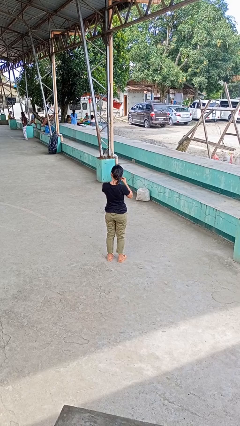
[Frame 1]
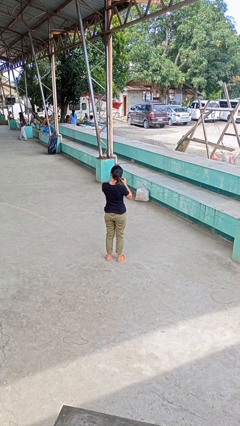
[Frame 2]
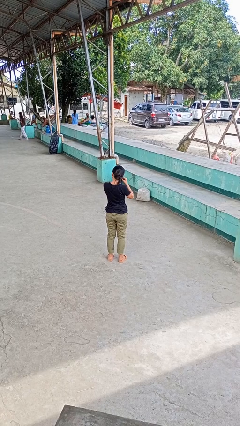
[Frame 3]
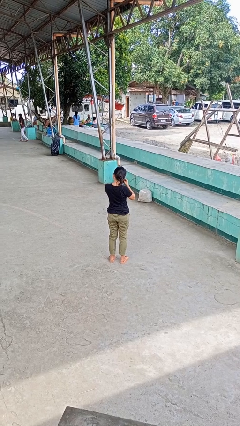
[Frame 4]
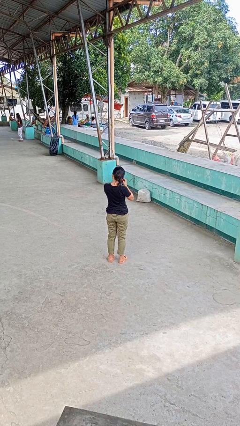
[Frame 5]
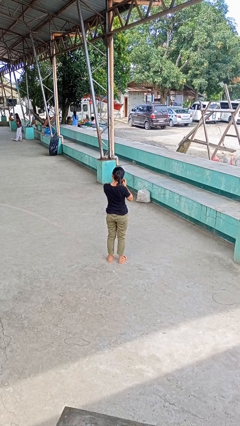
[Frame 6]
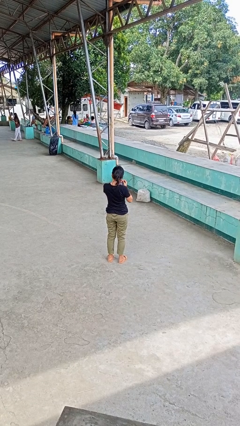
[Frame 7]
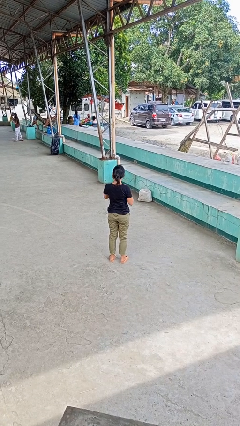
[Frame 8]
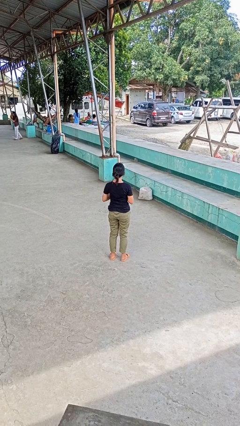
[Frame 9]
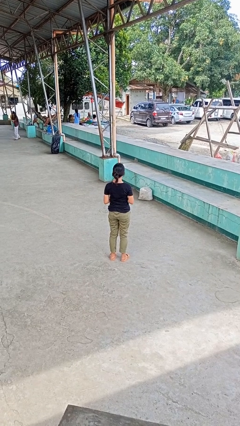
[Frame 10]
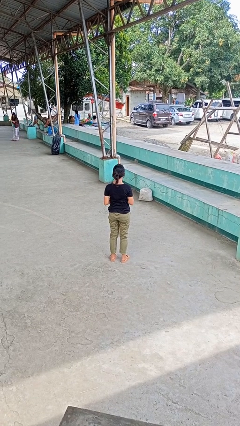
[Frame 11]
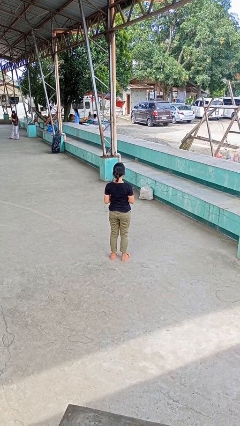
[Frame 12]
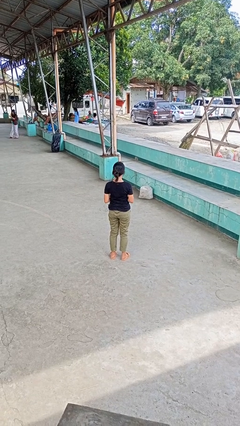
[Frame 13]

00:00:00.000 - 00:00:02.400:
person takes off earrings

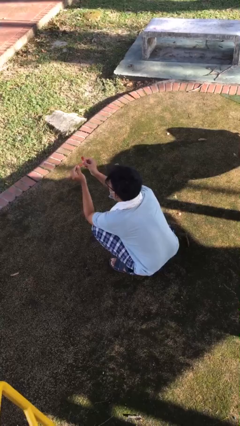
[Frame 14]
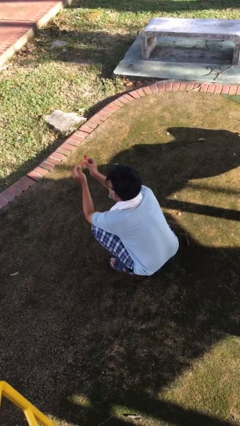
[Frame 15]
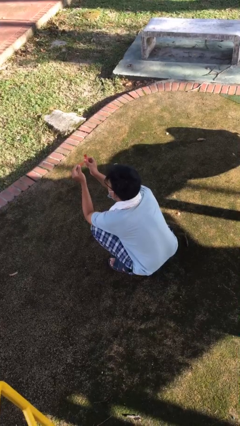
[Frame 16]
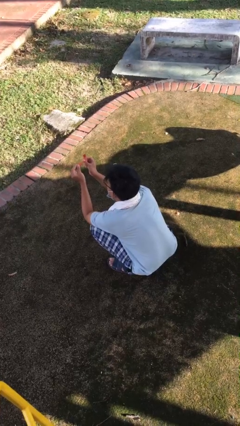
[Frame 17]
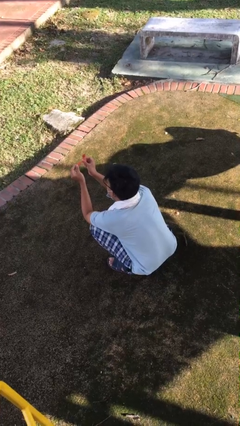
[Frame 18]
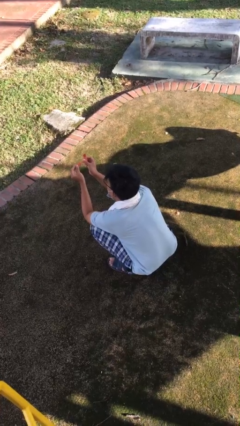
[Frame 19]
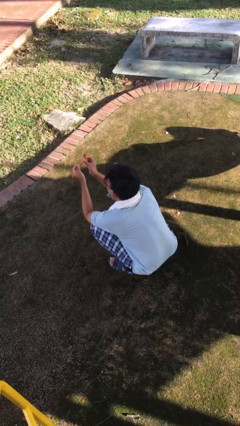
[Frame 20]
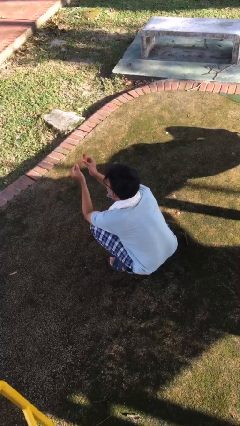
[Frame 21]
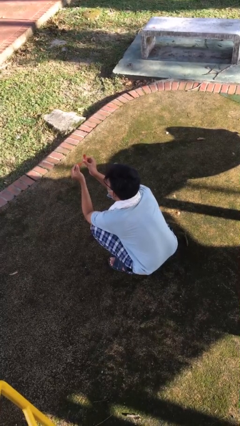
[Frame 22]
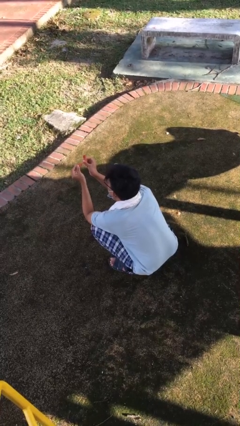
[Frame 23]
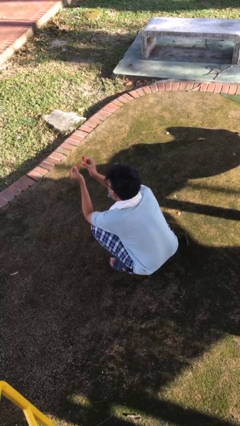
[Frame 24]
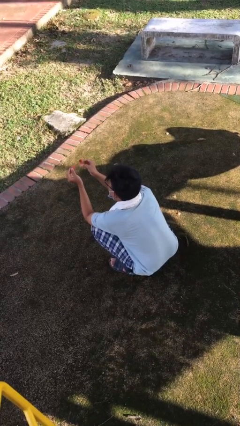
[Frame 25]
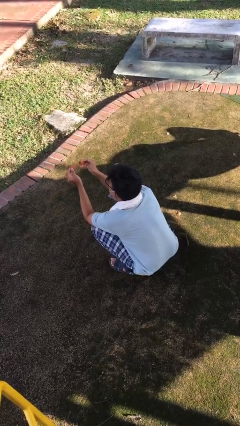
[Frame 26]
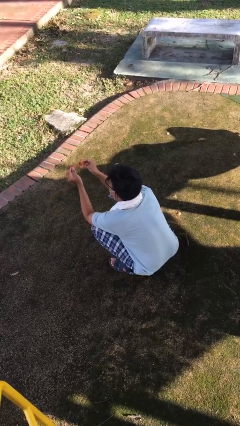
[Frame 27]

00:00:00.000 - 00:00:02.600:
person paints fingernails

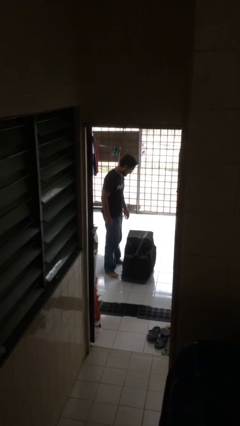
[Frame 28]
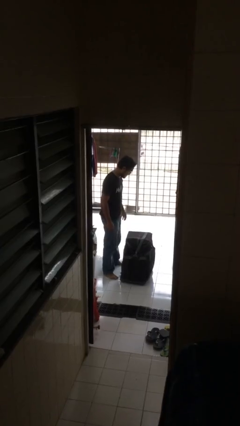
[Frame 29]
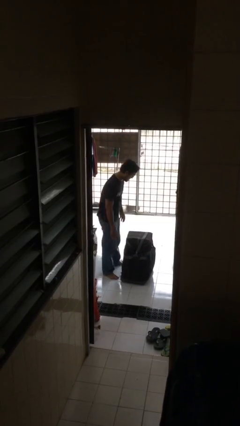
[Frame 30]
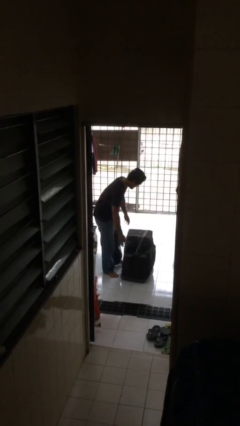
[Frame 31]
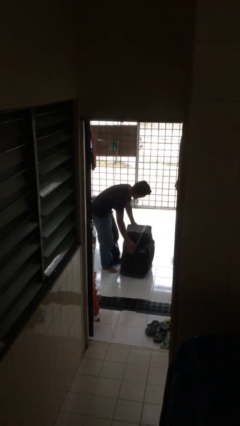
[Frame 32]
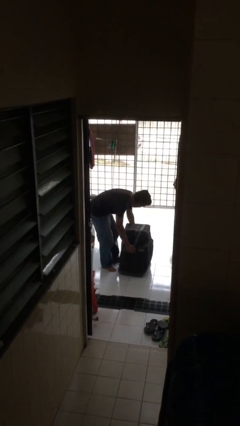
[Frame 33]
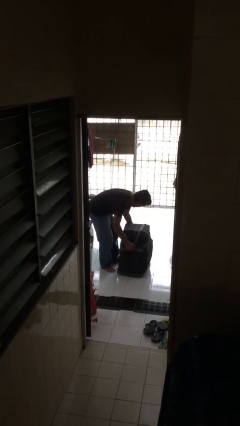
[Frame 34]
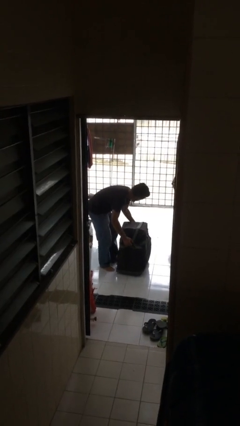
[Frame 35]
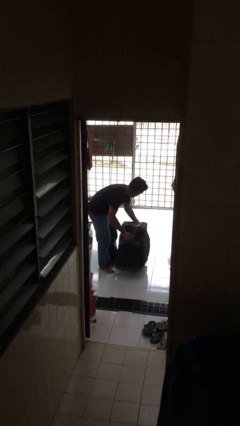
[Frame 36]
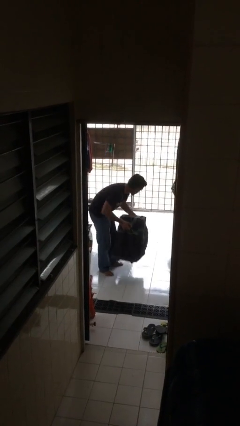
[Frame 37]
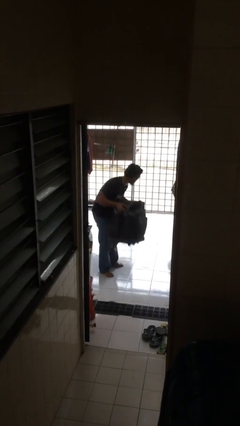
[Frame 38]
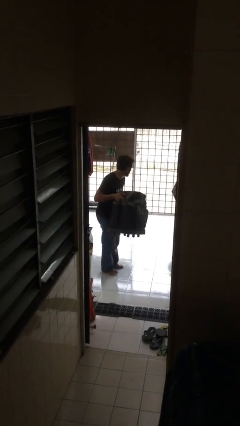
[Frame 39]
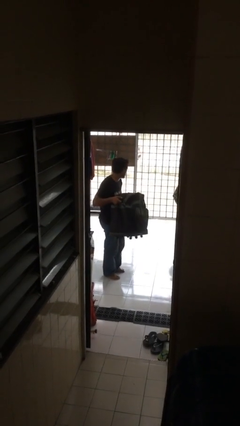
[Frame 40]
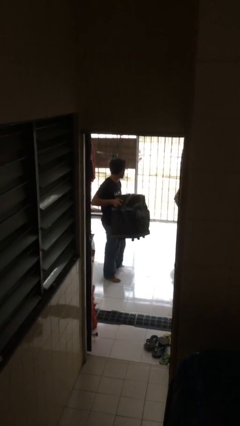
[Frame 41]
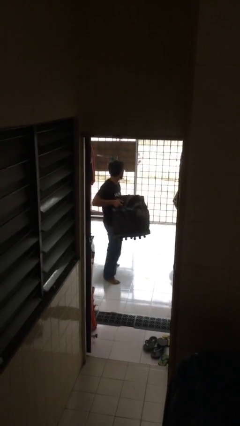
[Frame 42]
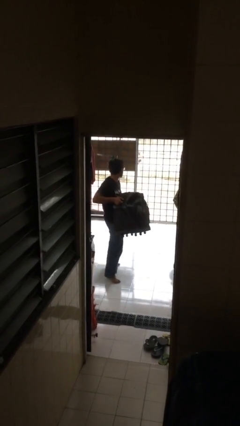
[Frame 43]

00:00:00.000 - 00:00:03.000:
person picks up object from floor

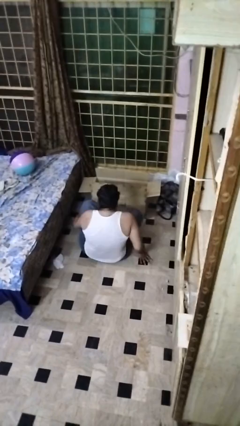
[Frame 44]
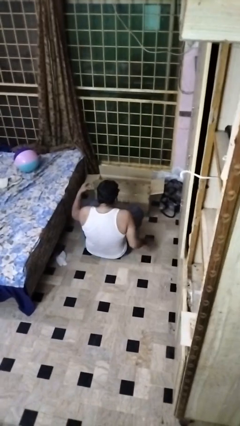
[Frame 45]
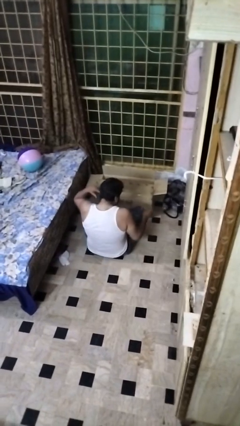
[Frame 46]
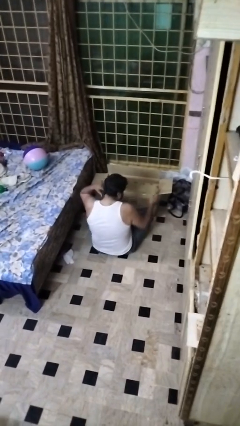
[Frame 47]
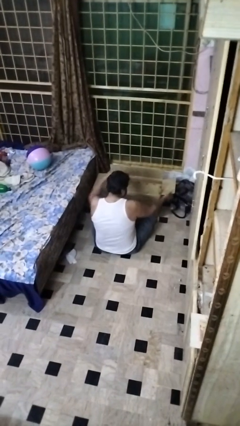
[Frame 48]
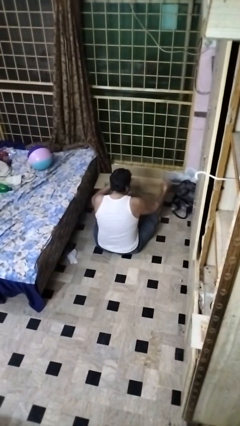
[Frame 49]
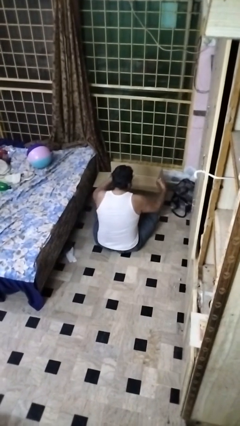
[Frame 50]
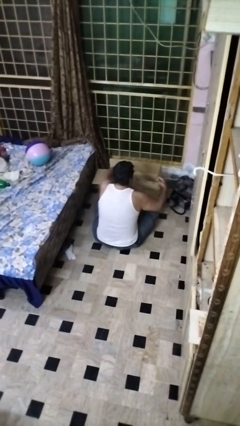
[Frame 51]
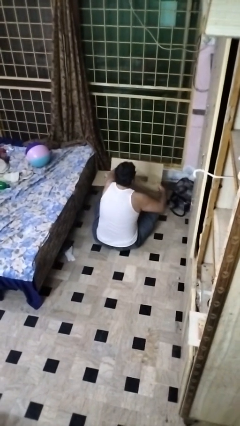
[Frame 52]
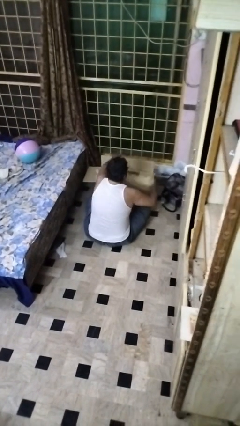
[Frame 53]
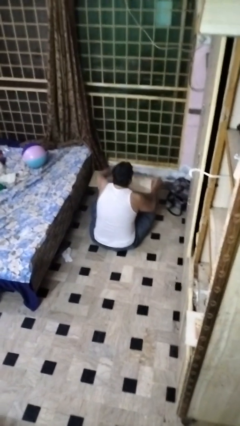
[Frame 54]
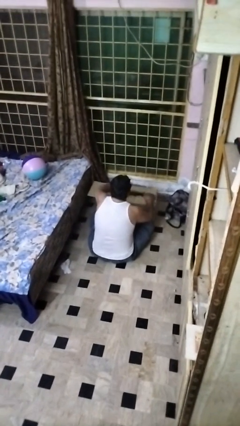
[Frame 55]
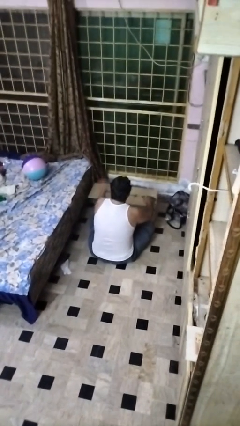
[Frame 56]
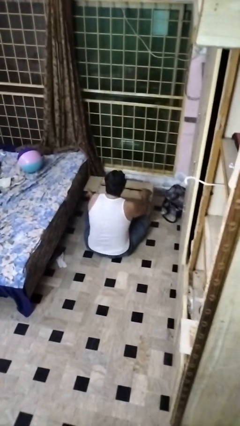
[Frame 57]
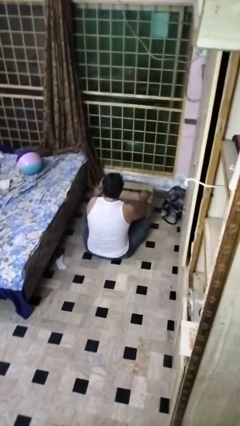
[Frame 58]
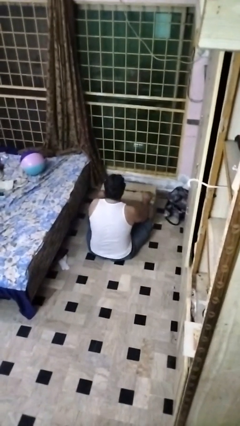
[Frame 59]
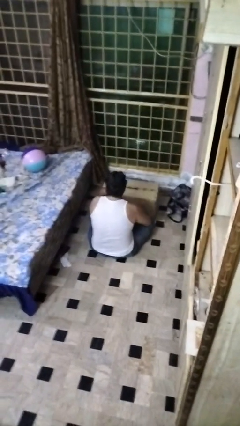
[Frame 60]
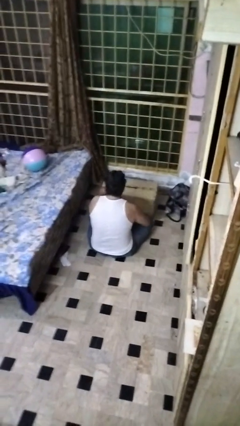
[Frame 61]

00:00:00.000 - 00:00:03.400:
person closes box

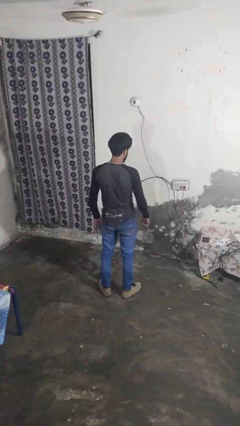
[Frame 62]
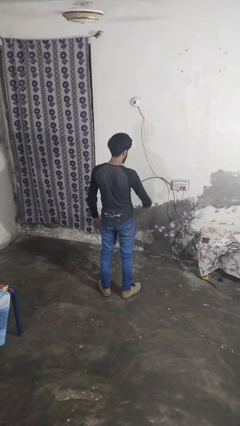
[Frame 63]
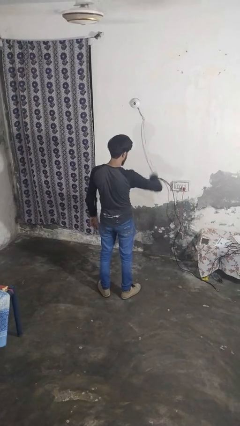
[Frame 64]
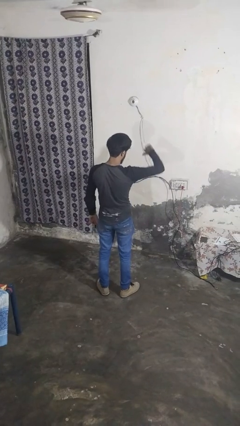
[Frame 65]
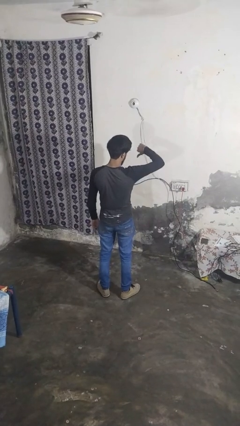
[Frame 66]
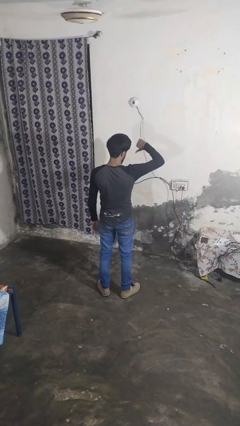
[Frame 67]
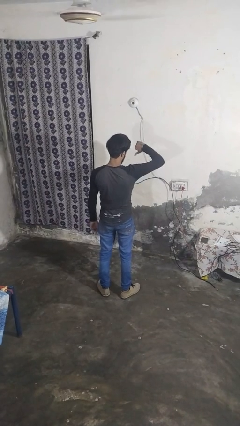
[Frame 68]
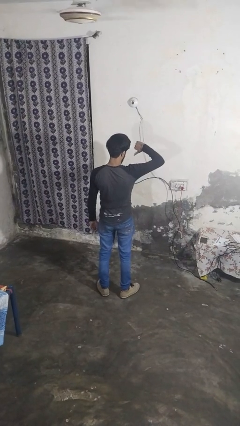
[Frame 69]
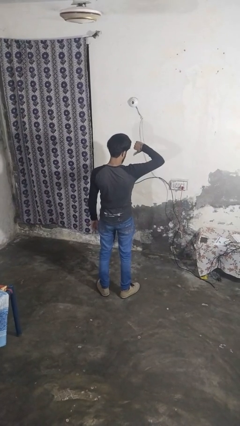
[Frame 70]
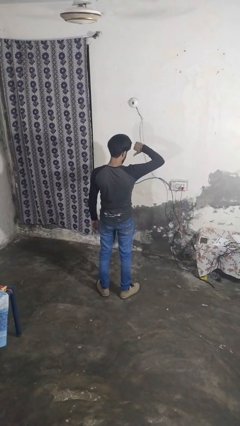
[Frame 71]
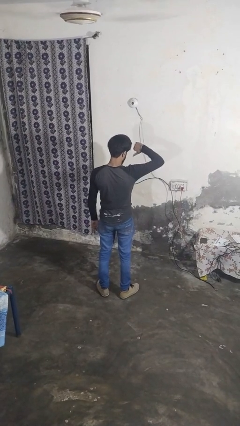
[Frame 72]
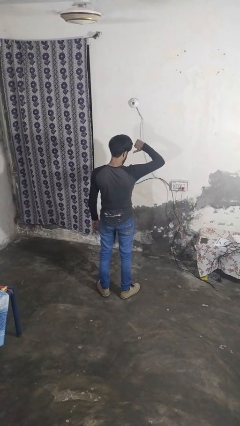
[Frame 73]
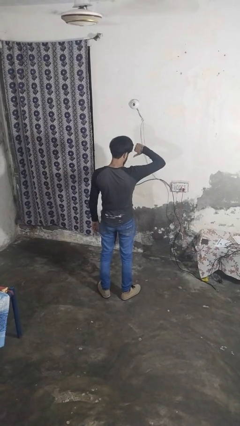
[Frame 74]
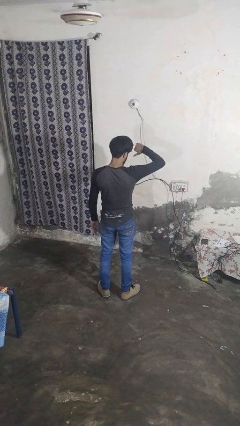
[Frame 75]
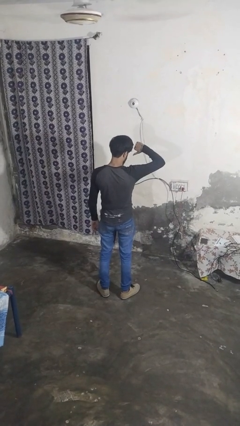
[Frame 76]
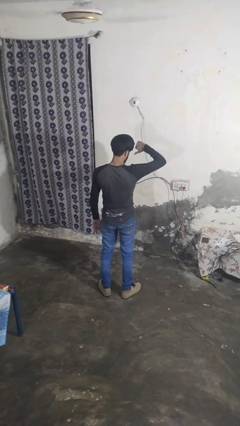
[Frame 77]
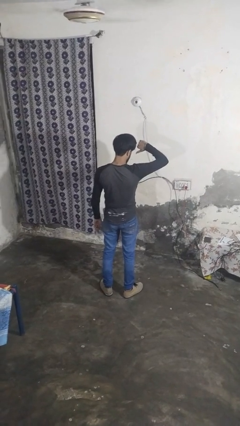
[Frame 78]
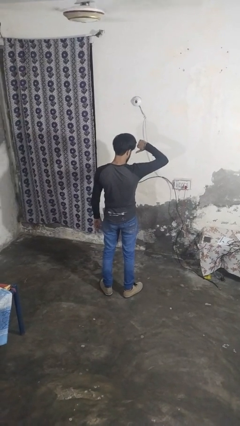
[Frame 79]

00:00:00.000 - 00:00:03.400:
person gestures thumbs down

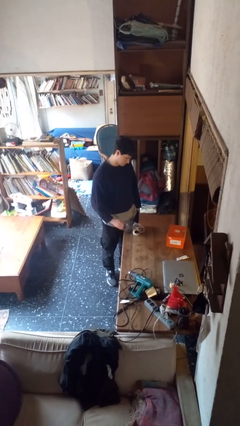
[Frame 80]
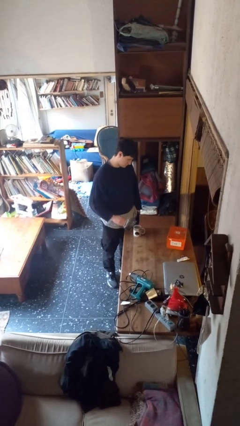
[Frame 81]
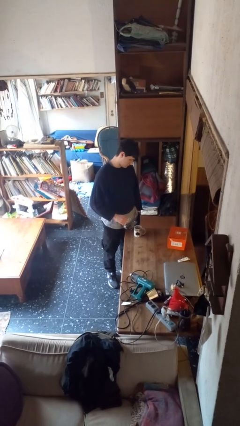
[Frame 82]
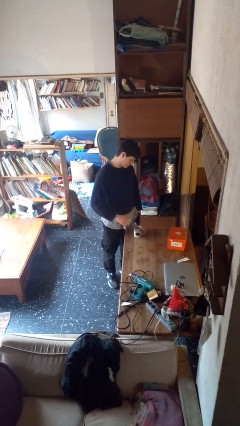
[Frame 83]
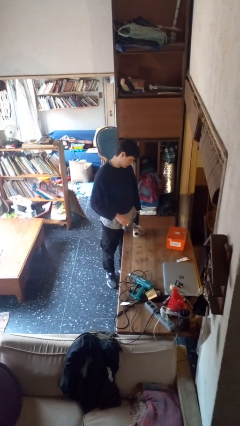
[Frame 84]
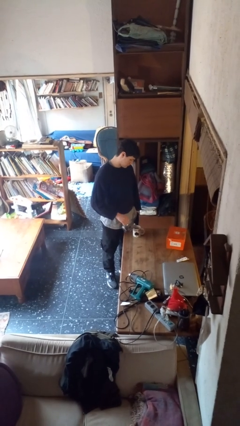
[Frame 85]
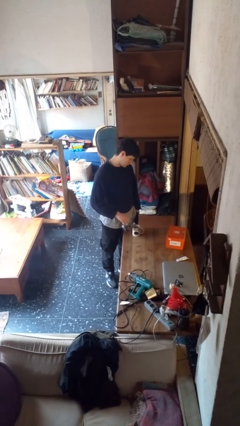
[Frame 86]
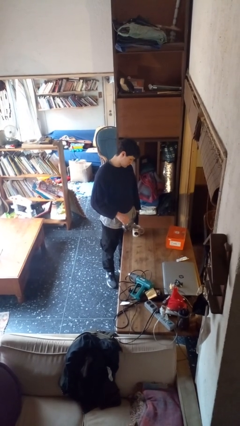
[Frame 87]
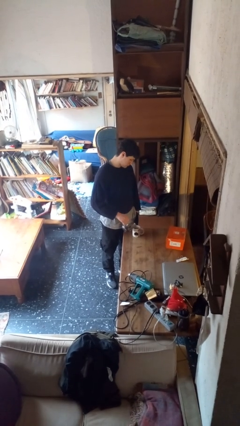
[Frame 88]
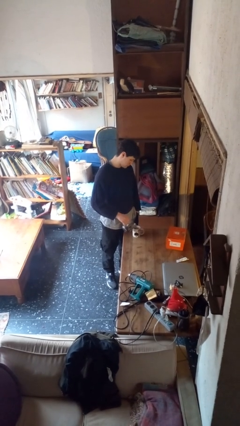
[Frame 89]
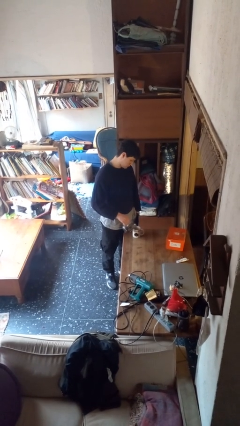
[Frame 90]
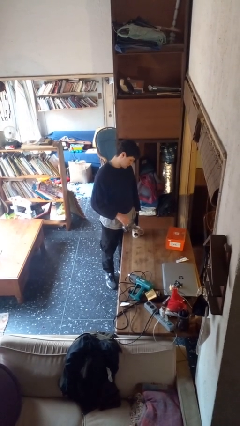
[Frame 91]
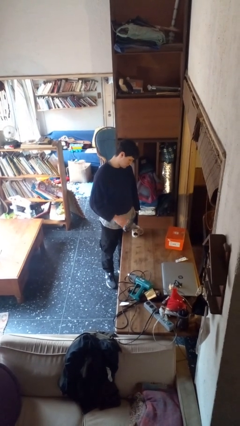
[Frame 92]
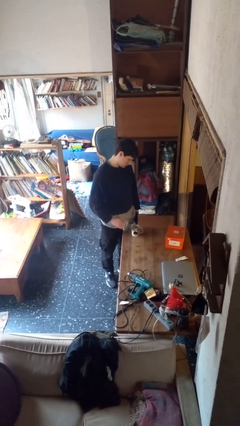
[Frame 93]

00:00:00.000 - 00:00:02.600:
person pours coffee into mug
